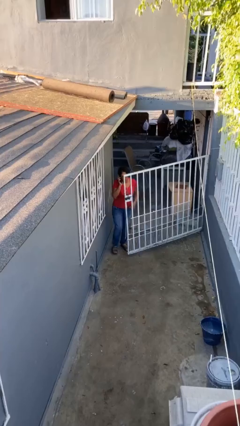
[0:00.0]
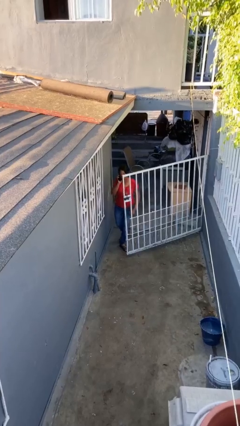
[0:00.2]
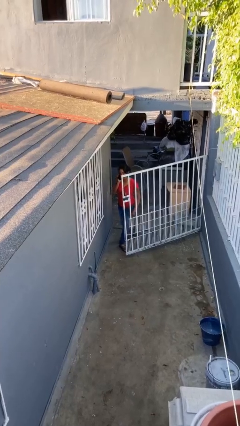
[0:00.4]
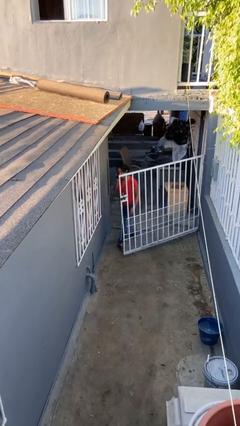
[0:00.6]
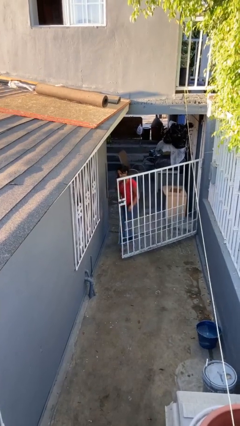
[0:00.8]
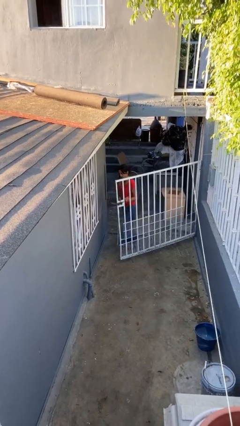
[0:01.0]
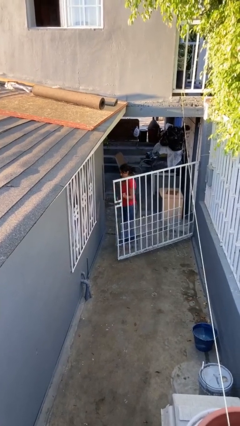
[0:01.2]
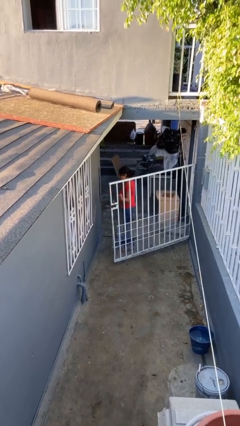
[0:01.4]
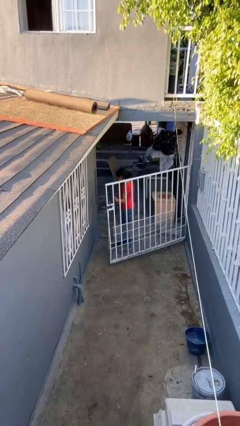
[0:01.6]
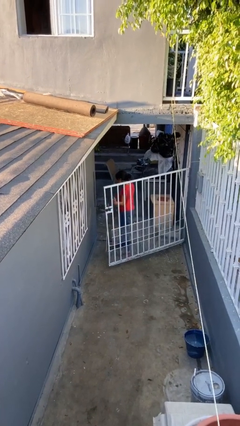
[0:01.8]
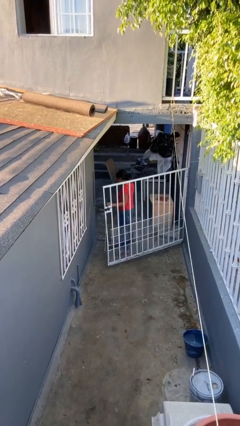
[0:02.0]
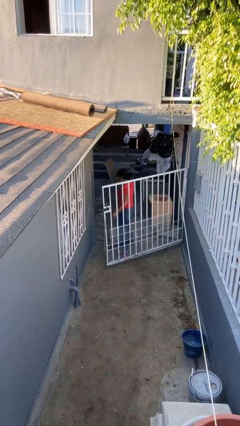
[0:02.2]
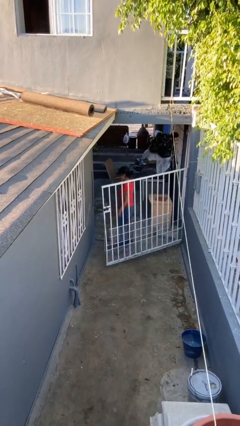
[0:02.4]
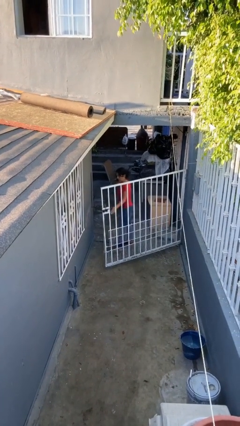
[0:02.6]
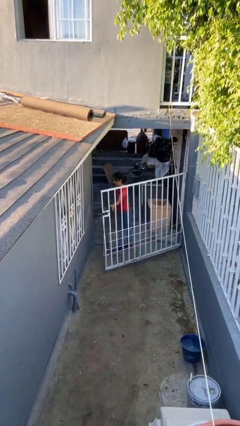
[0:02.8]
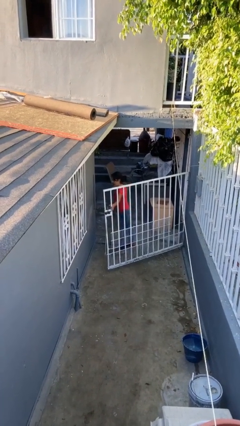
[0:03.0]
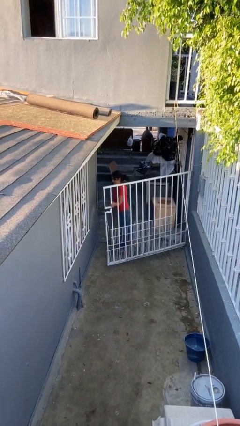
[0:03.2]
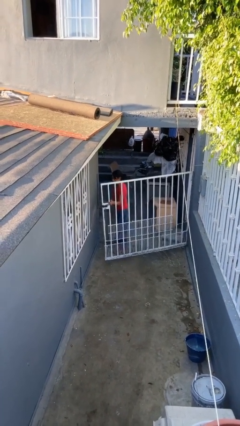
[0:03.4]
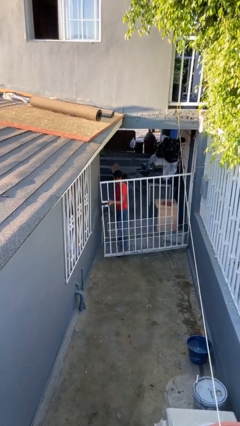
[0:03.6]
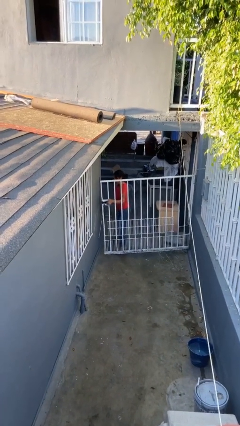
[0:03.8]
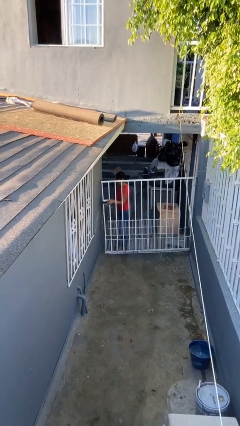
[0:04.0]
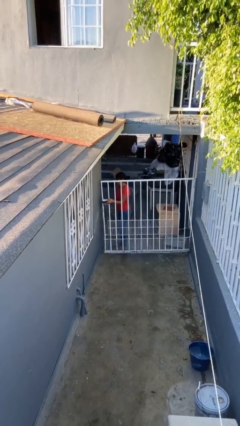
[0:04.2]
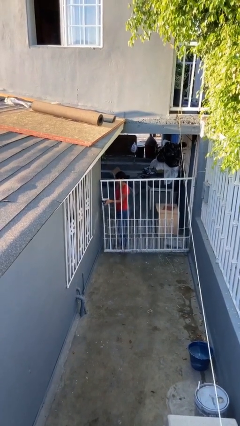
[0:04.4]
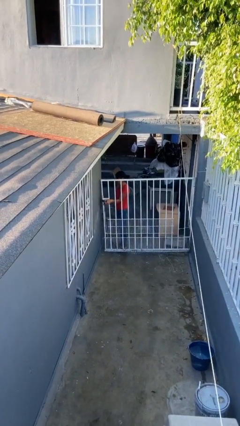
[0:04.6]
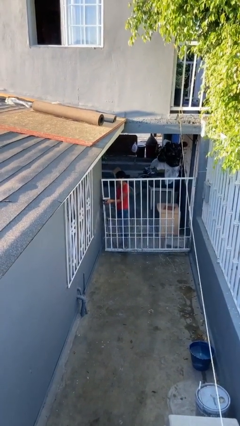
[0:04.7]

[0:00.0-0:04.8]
person exits scene through structure

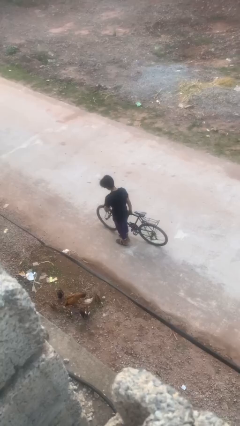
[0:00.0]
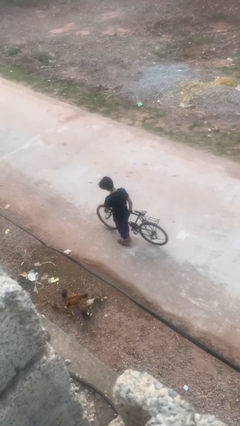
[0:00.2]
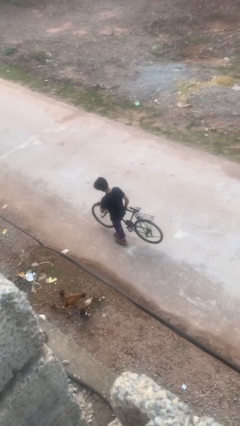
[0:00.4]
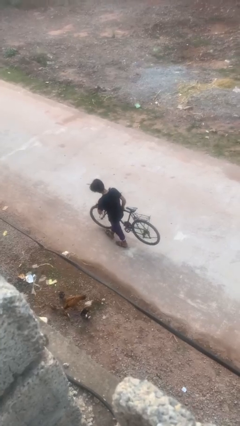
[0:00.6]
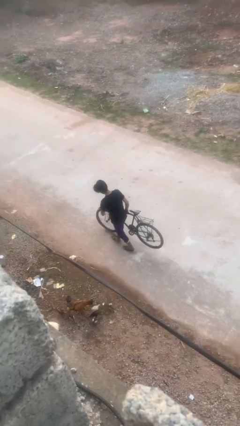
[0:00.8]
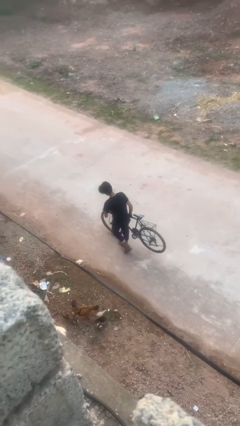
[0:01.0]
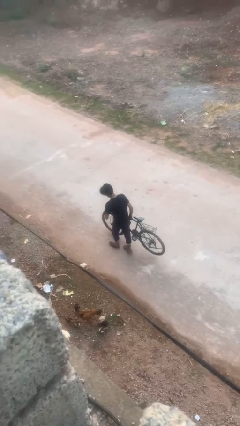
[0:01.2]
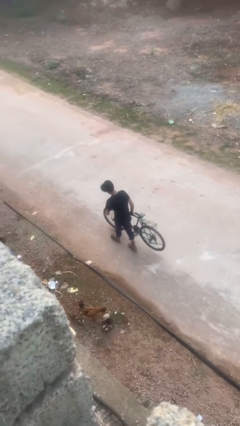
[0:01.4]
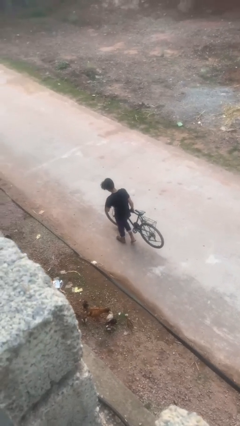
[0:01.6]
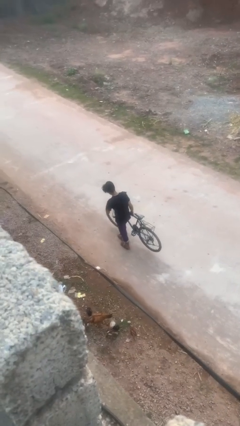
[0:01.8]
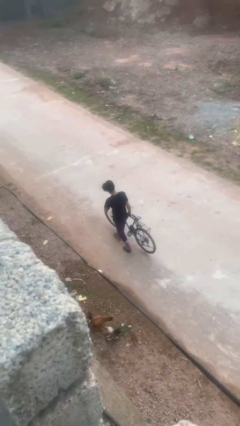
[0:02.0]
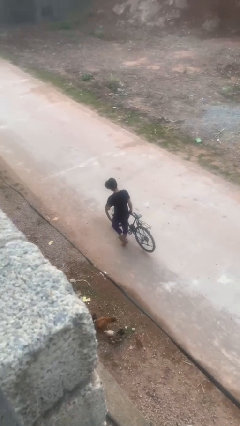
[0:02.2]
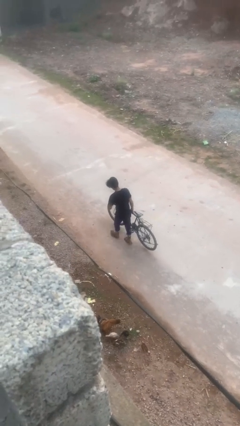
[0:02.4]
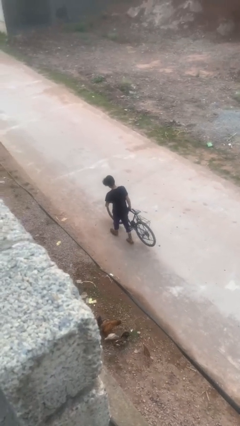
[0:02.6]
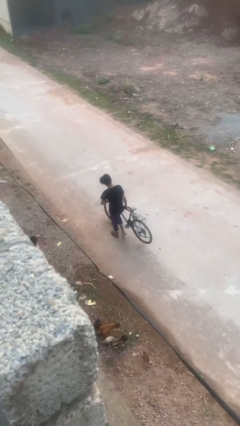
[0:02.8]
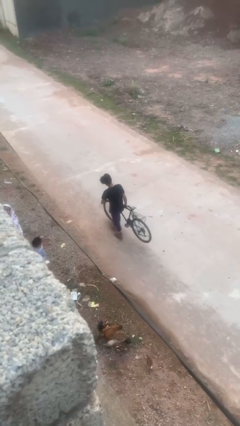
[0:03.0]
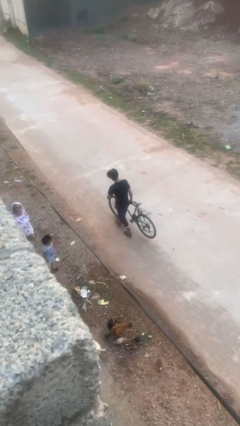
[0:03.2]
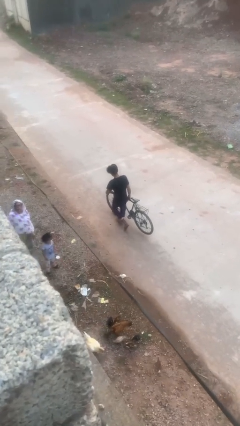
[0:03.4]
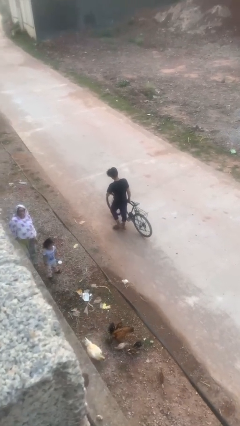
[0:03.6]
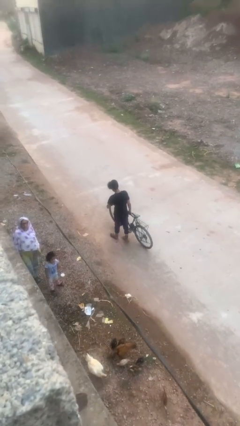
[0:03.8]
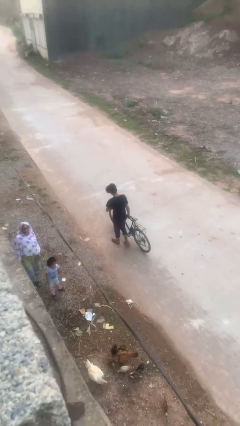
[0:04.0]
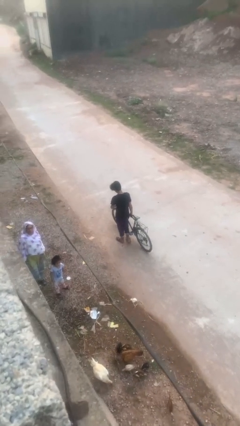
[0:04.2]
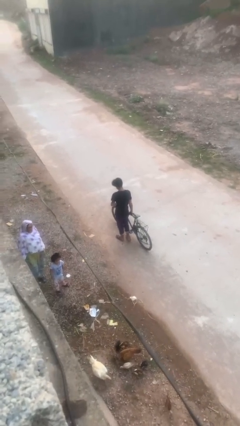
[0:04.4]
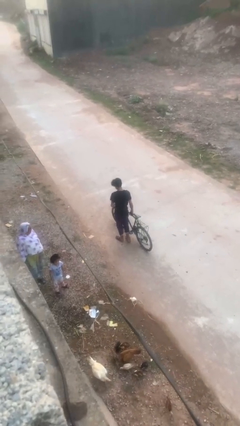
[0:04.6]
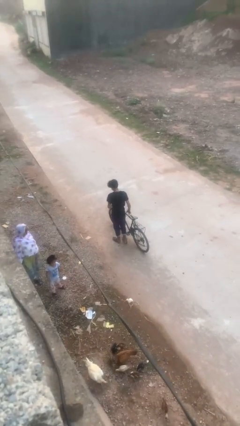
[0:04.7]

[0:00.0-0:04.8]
person carries bicycle

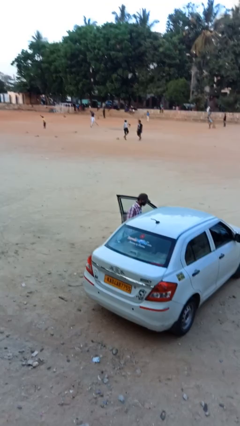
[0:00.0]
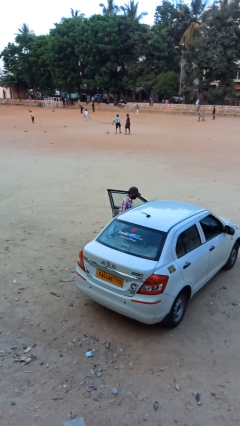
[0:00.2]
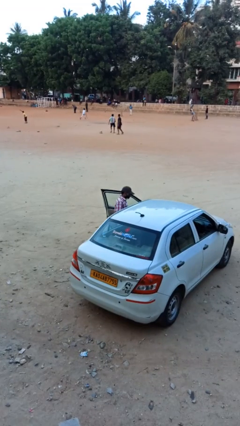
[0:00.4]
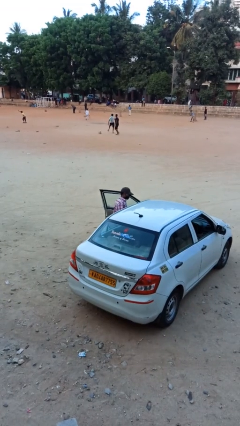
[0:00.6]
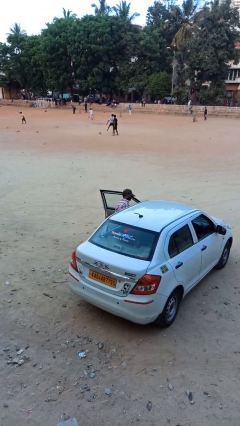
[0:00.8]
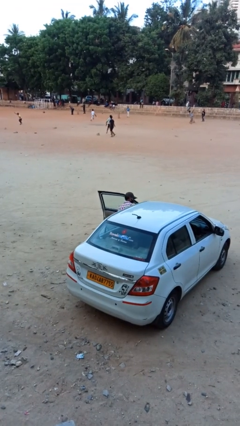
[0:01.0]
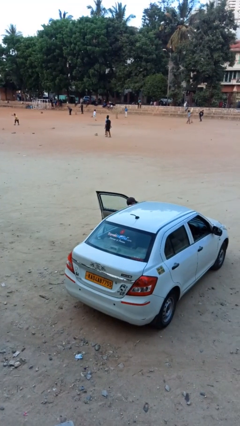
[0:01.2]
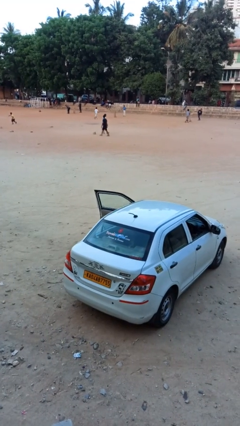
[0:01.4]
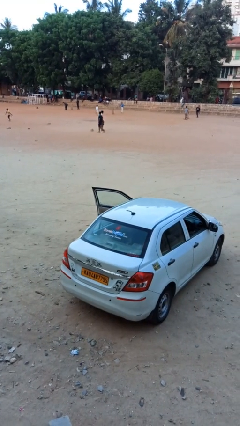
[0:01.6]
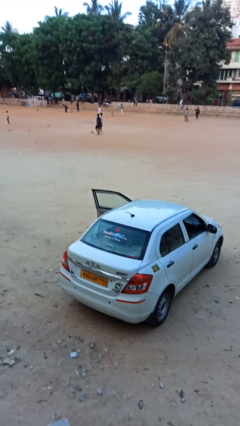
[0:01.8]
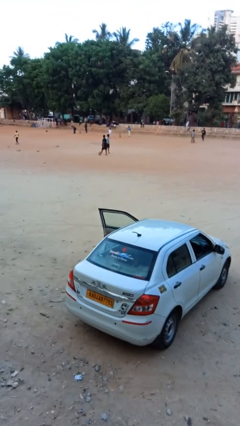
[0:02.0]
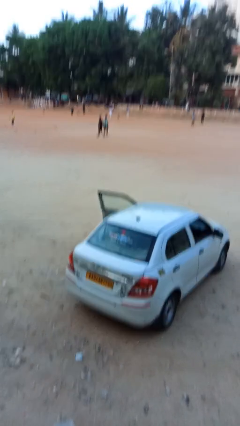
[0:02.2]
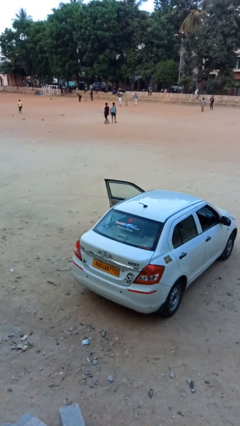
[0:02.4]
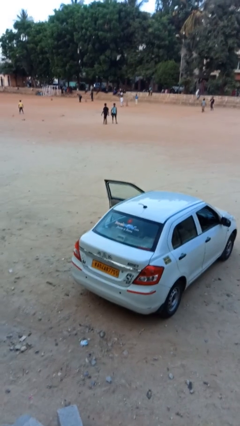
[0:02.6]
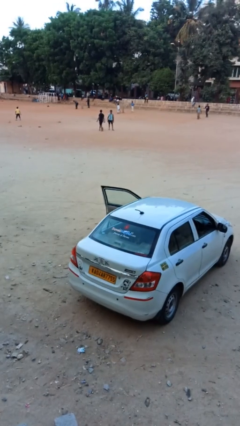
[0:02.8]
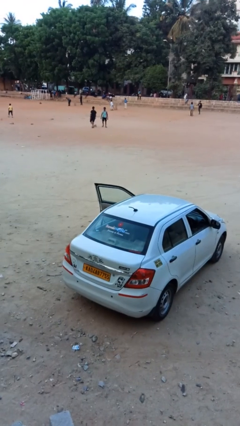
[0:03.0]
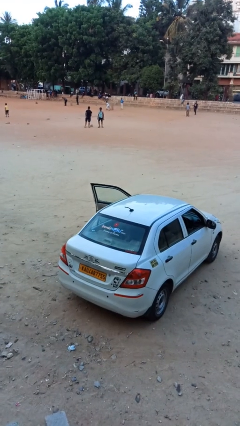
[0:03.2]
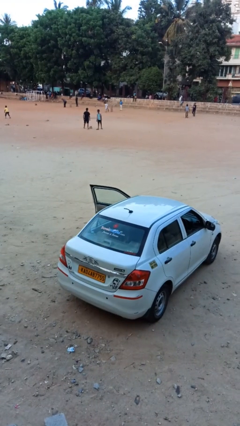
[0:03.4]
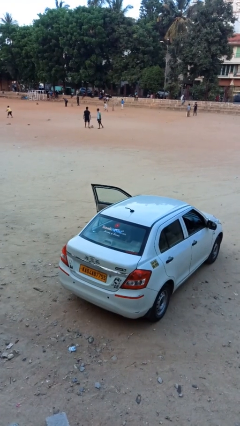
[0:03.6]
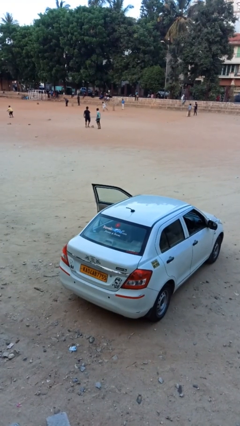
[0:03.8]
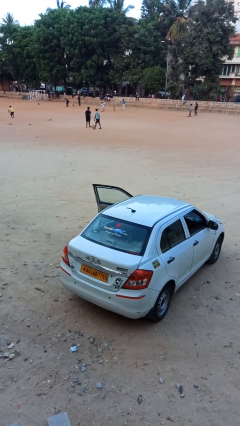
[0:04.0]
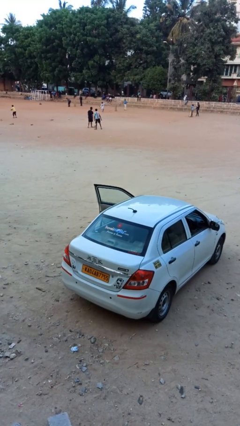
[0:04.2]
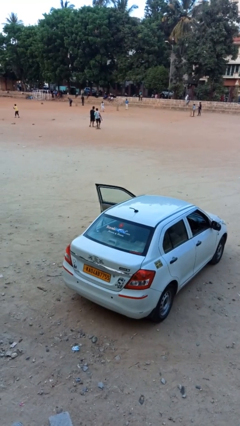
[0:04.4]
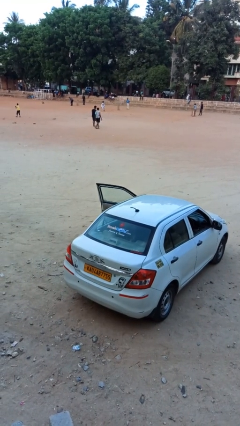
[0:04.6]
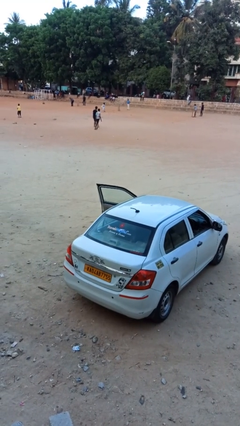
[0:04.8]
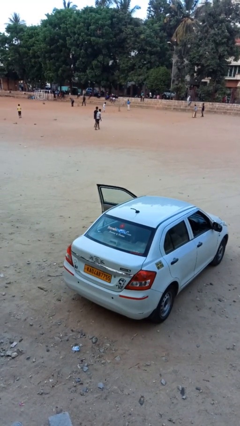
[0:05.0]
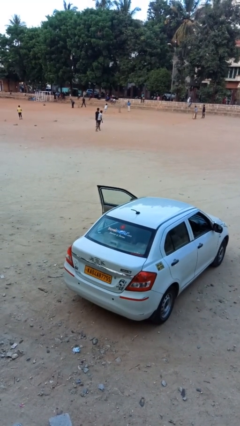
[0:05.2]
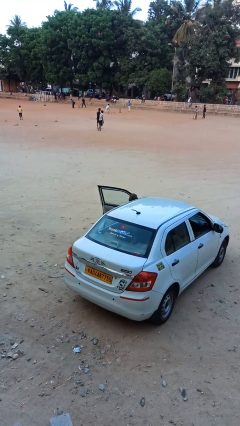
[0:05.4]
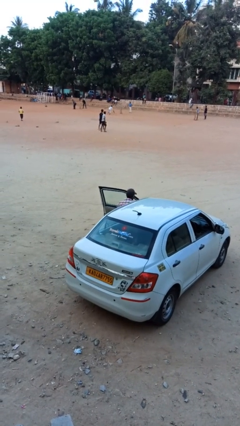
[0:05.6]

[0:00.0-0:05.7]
person enters car

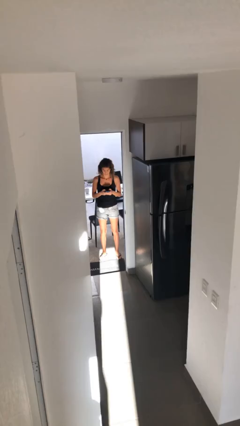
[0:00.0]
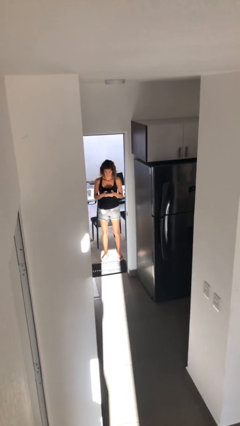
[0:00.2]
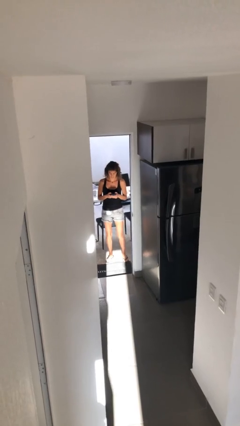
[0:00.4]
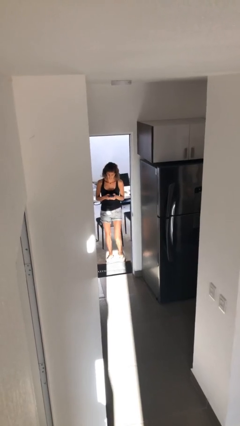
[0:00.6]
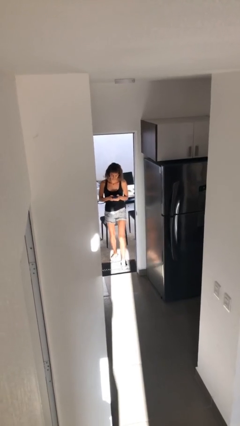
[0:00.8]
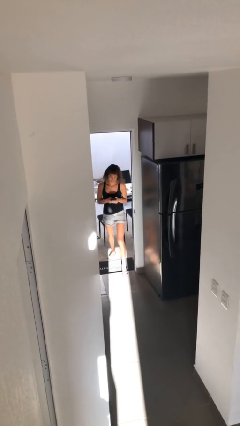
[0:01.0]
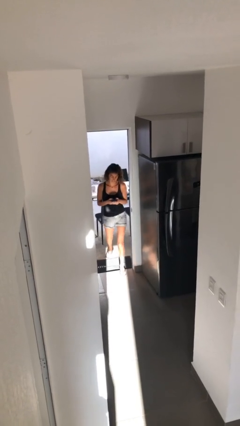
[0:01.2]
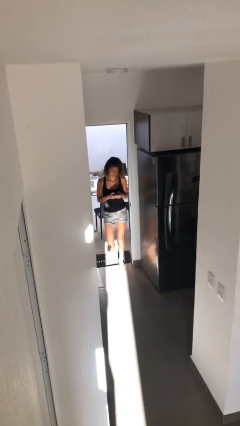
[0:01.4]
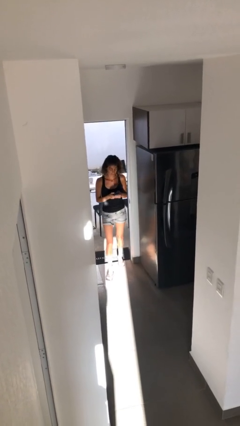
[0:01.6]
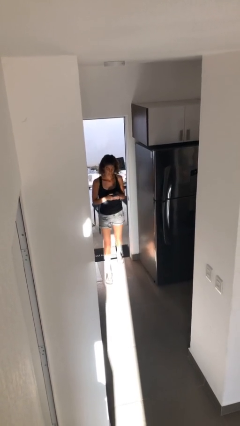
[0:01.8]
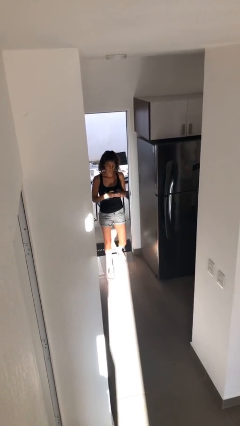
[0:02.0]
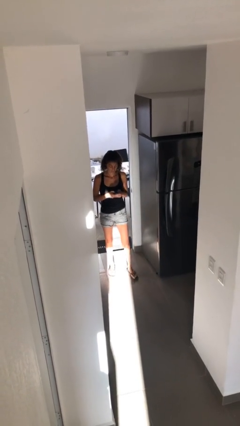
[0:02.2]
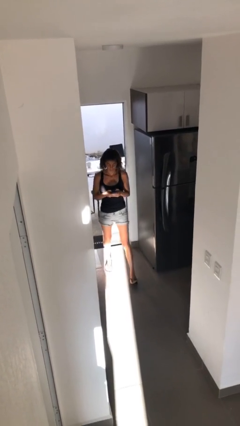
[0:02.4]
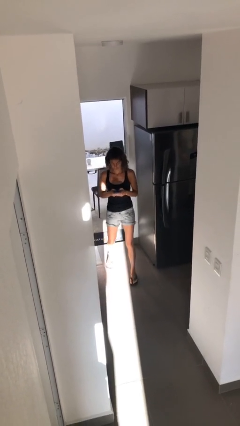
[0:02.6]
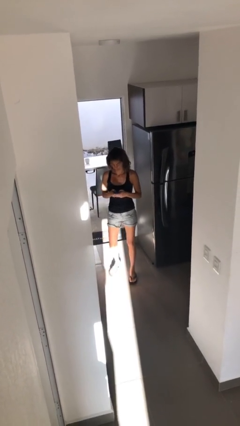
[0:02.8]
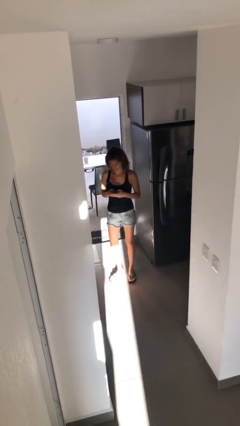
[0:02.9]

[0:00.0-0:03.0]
person enters scene through structure
